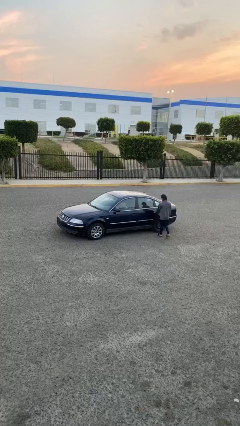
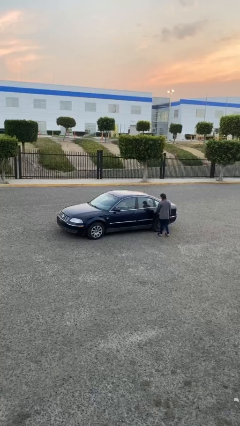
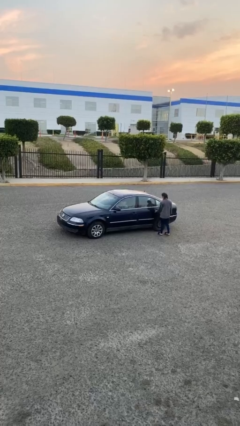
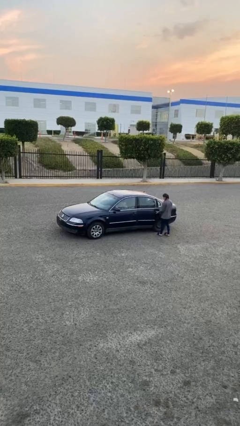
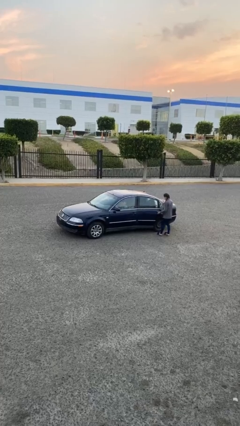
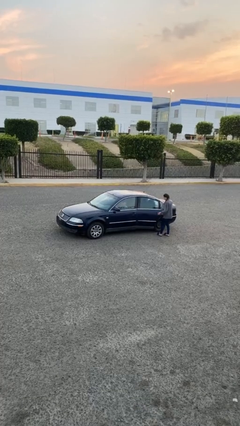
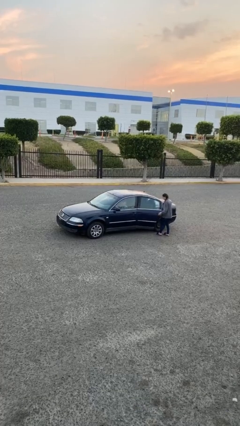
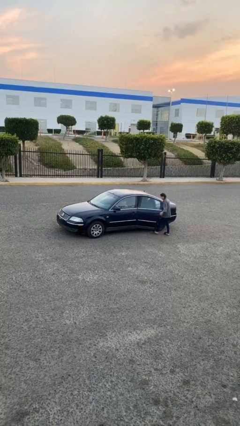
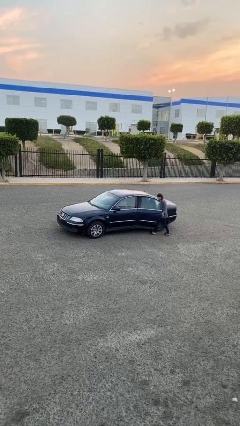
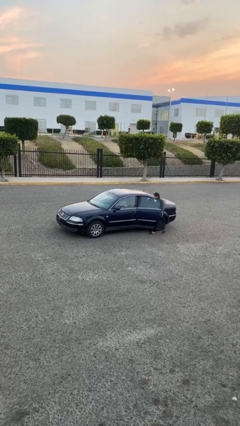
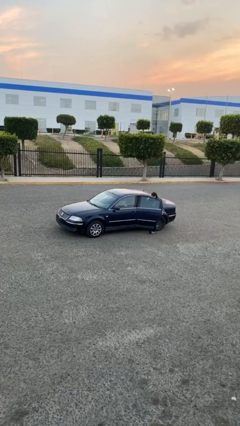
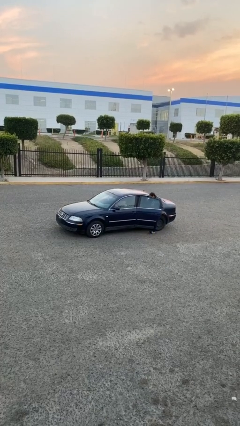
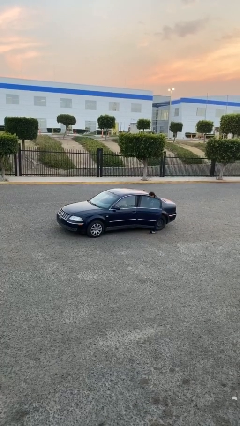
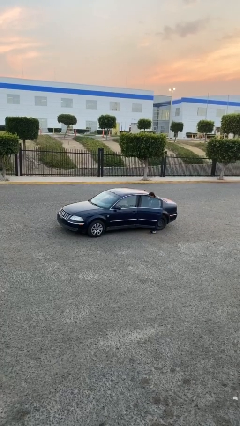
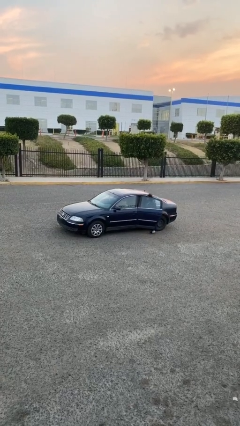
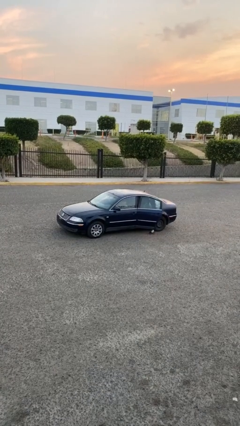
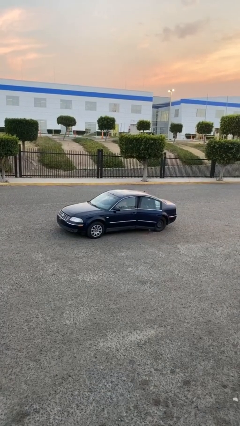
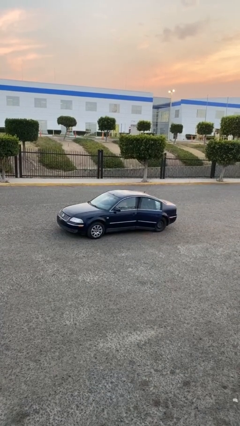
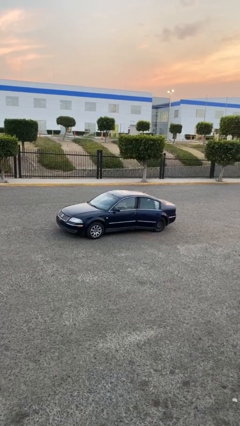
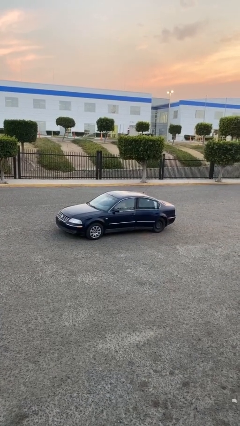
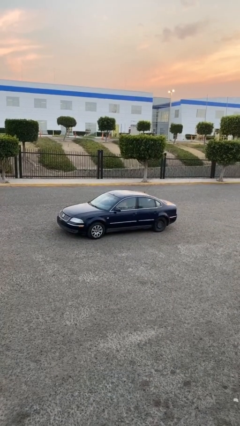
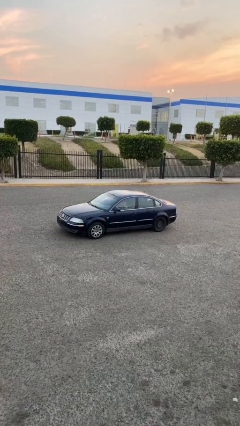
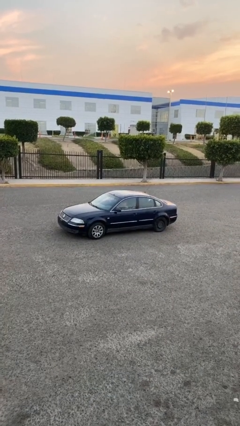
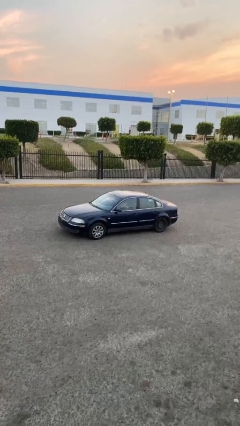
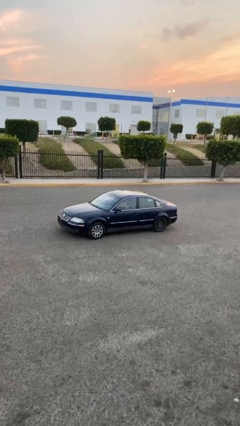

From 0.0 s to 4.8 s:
car picks up person

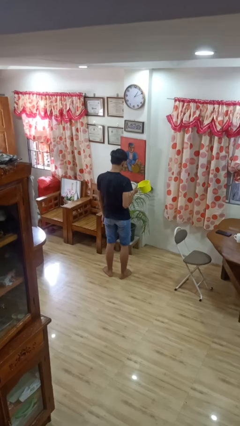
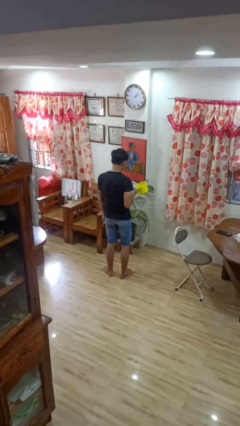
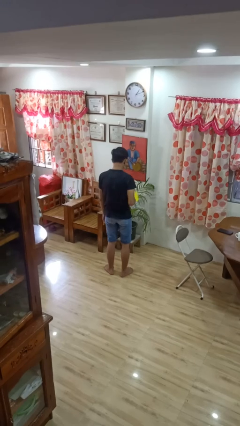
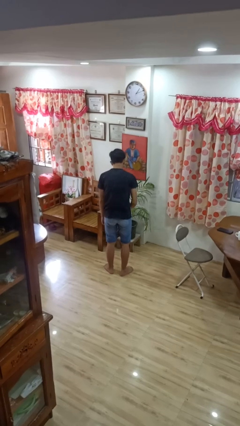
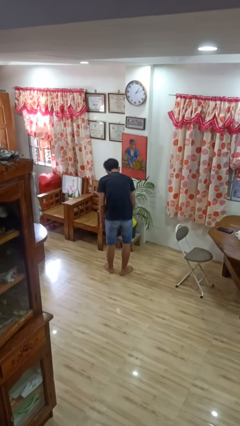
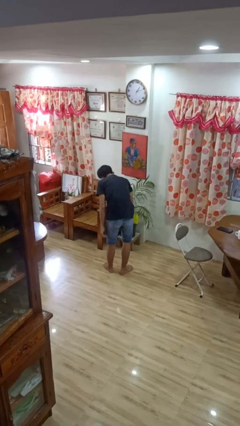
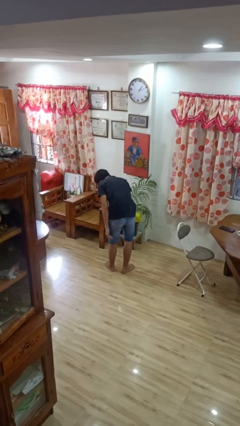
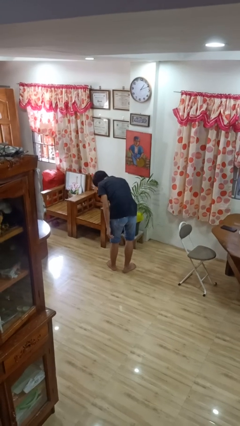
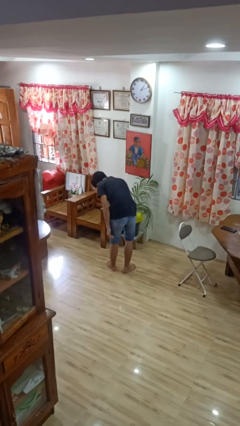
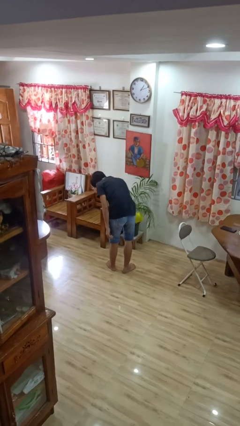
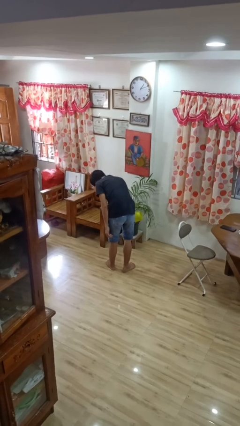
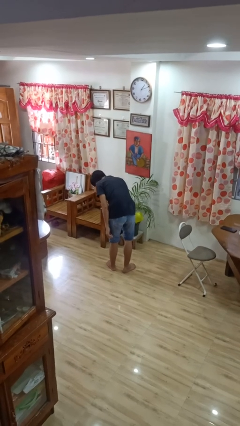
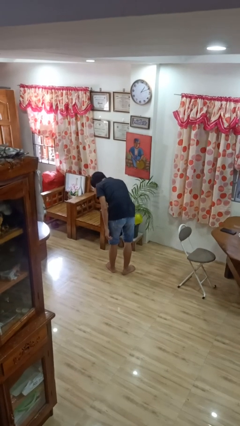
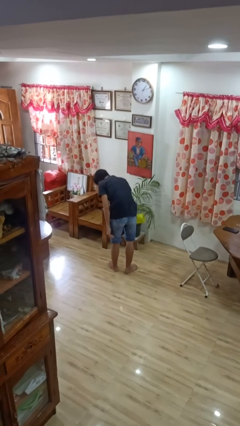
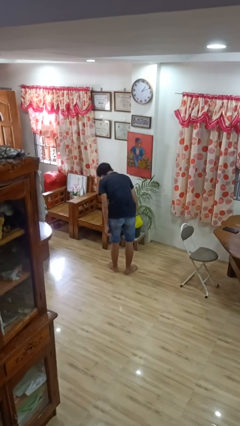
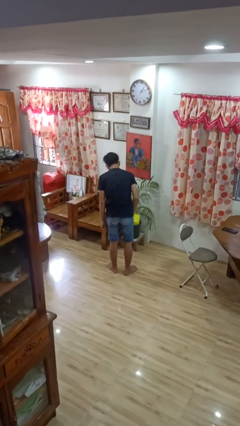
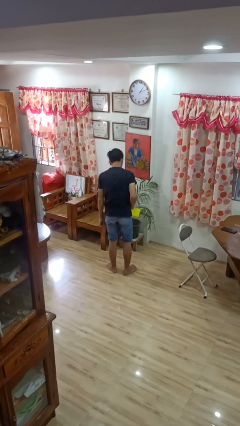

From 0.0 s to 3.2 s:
person waters houseplant

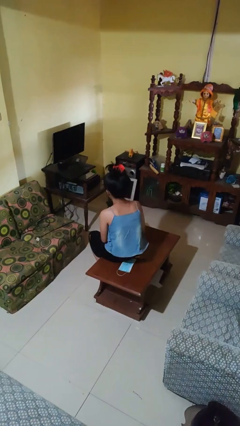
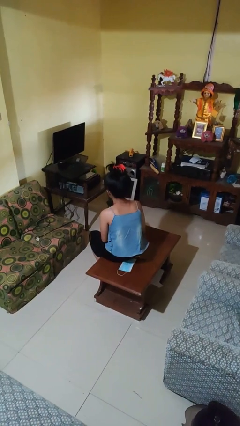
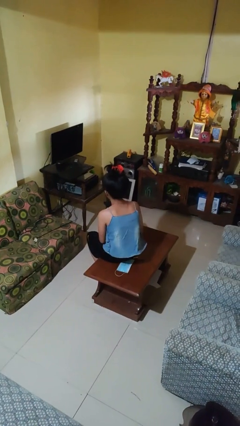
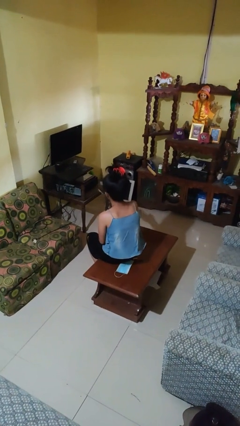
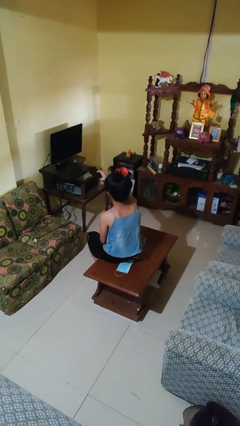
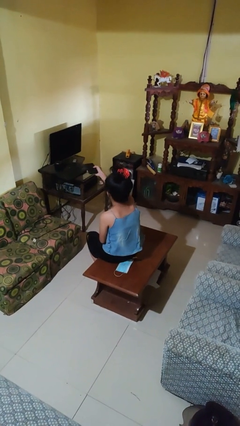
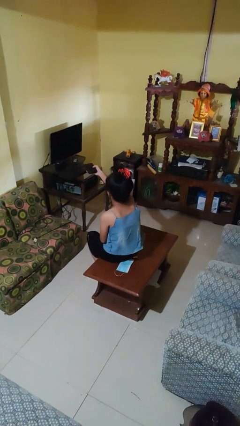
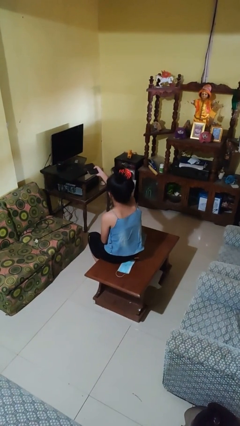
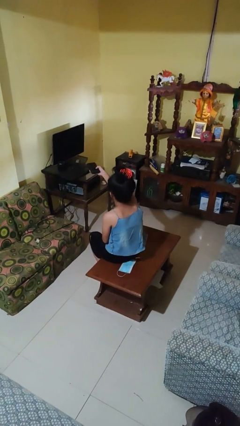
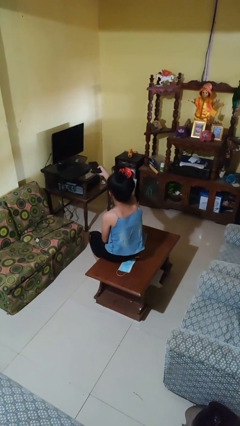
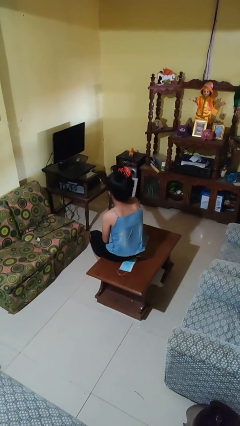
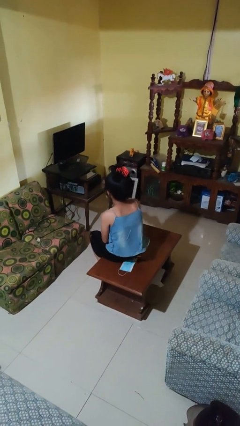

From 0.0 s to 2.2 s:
person uses television remote

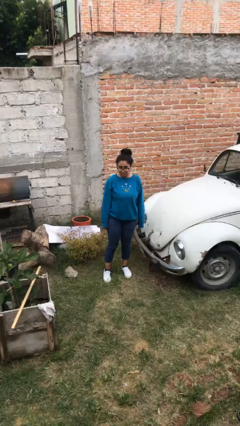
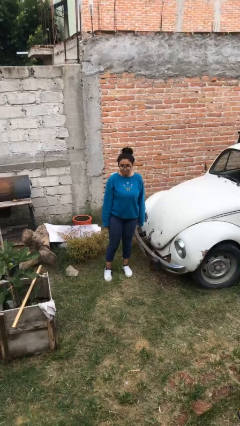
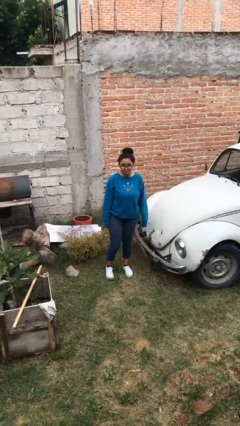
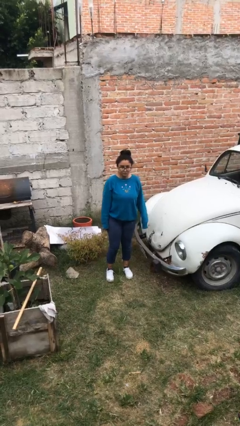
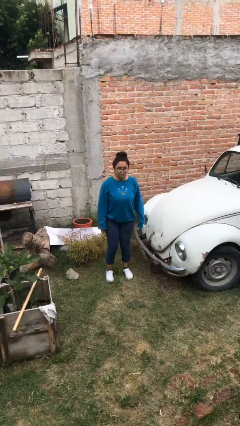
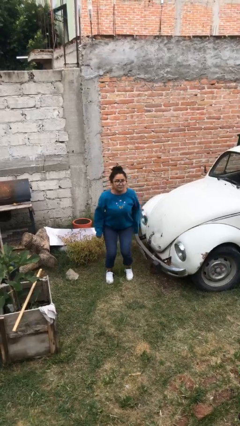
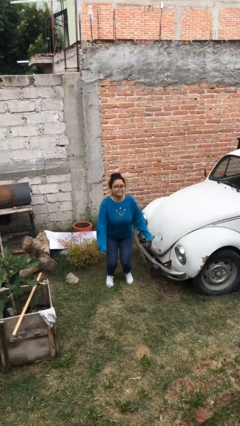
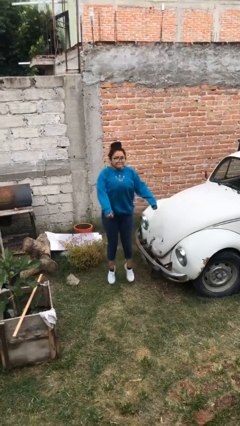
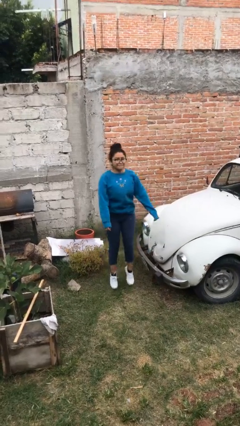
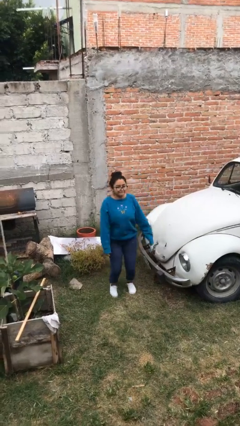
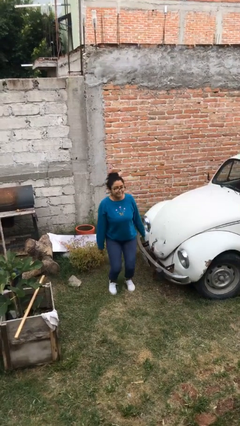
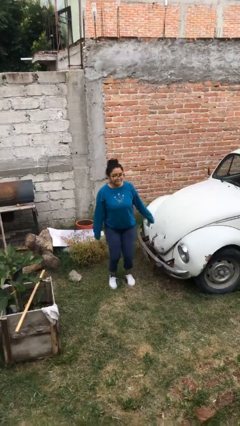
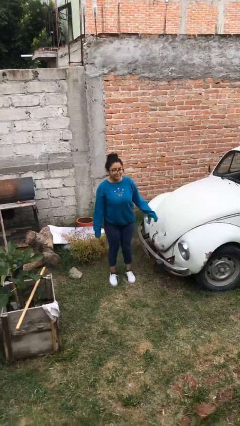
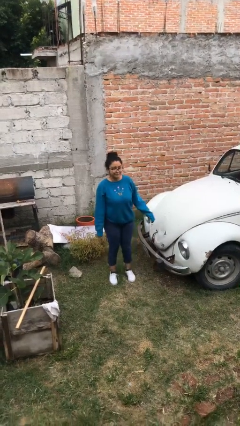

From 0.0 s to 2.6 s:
person jumps

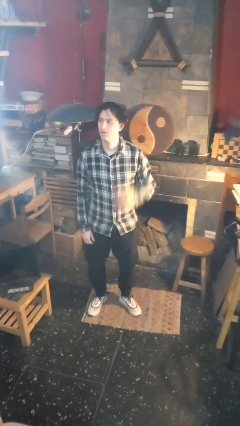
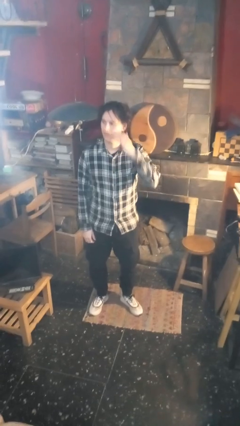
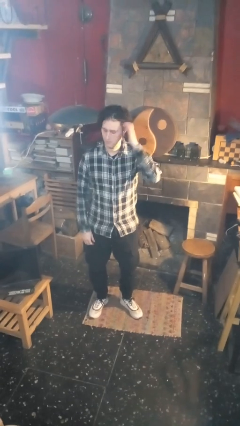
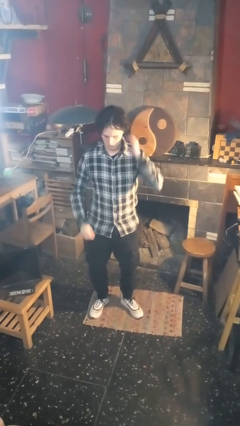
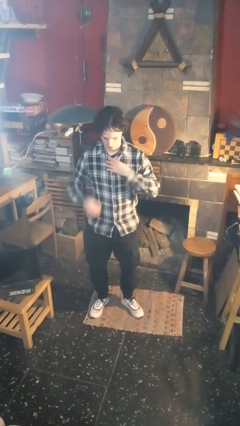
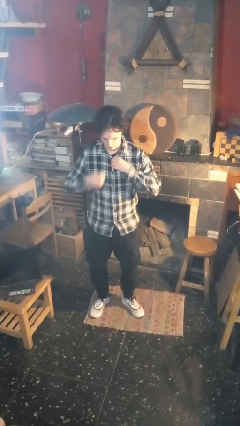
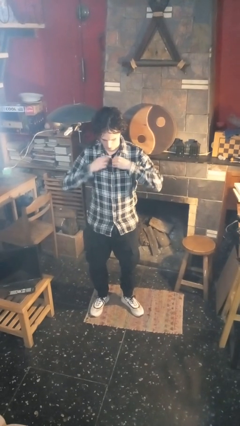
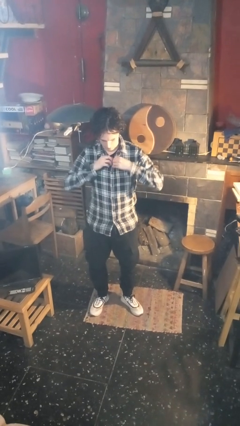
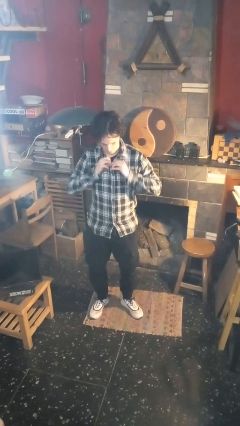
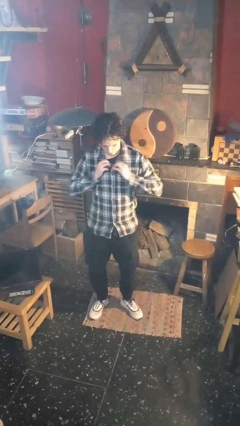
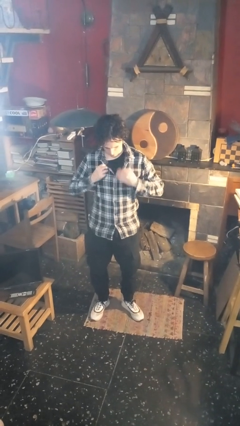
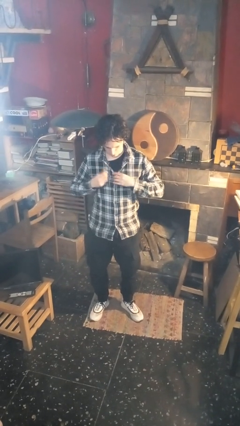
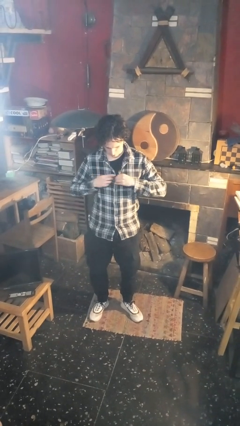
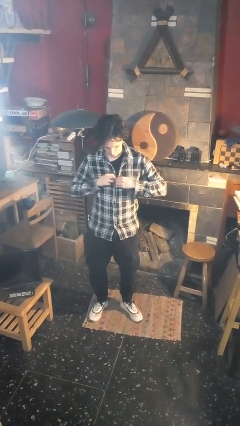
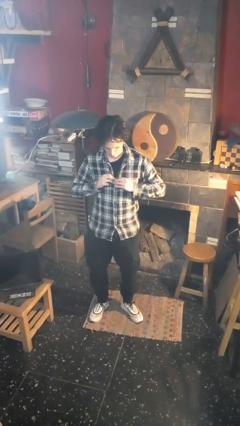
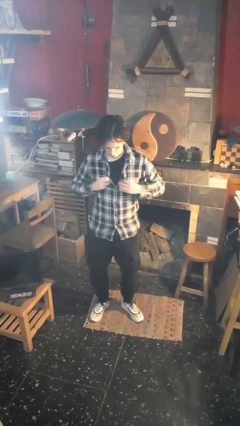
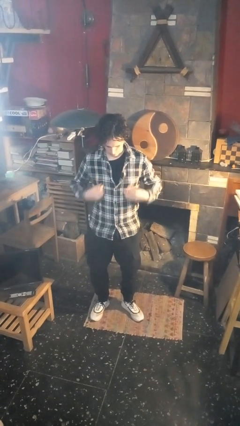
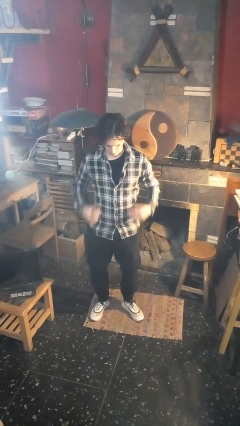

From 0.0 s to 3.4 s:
person unbuttons shirt

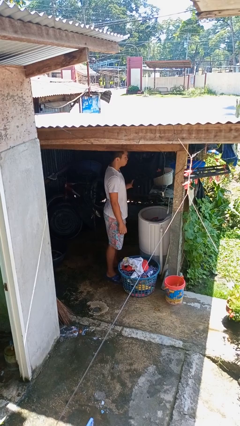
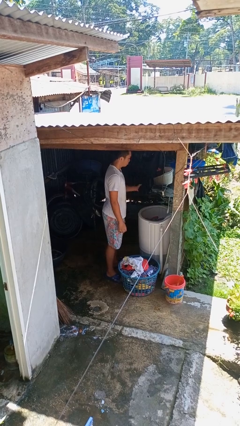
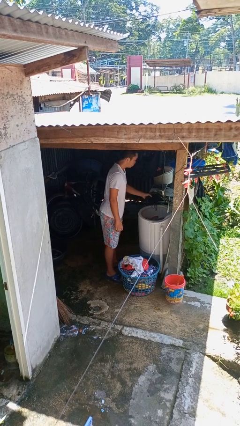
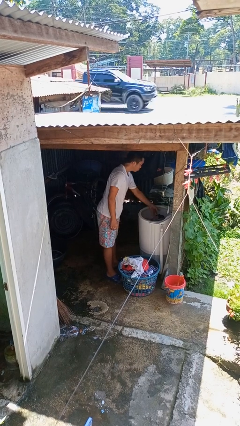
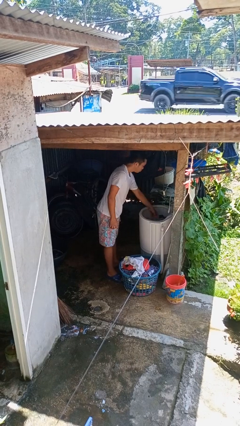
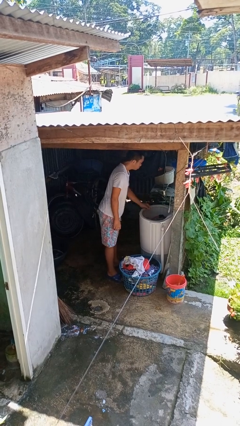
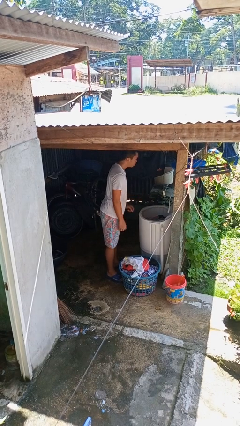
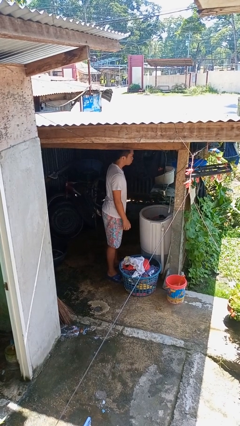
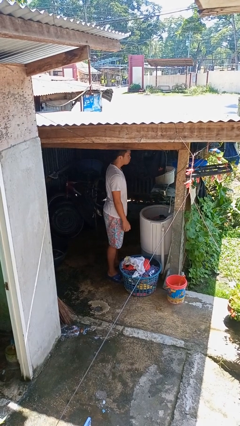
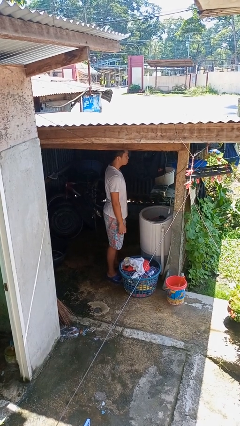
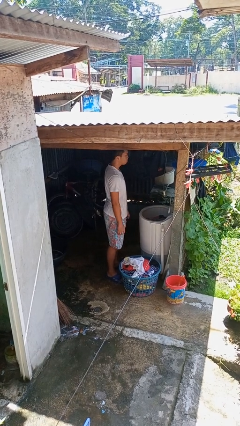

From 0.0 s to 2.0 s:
person loads clotheswasher
